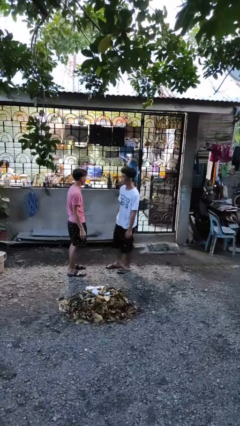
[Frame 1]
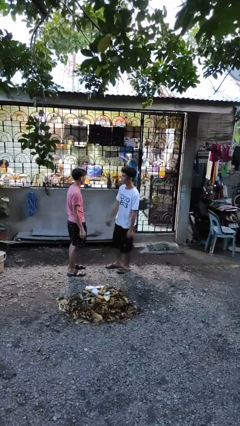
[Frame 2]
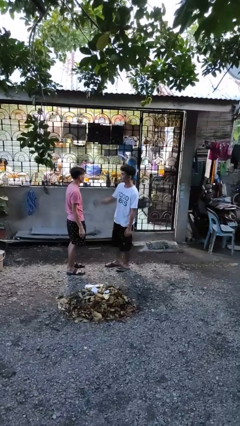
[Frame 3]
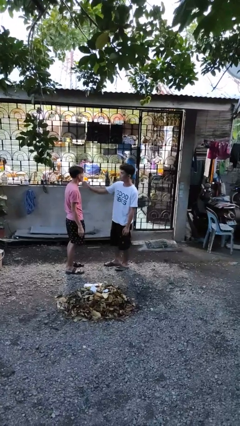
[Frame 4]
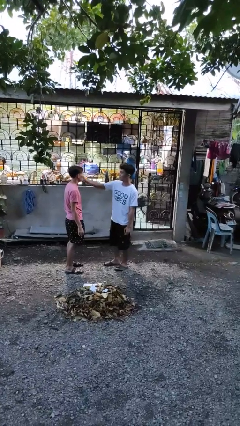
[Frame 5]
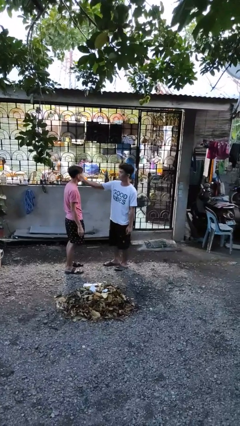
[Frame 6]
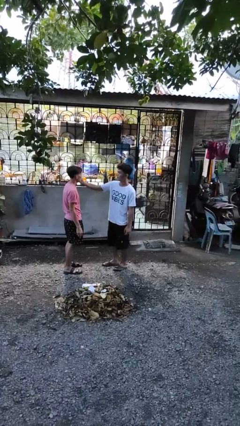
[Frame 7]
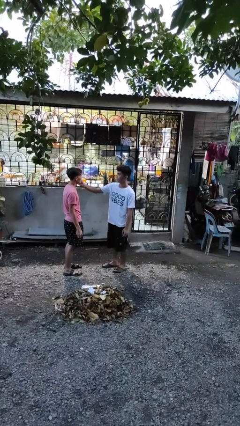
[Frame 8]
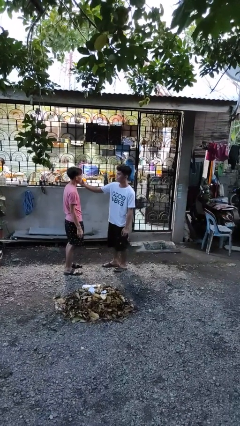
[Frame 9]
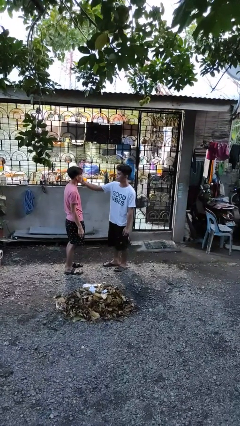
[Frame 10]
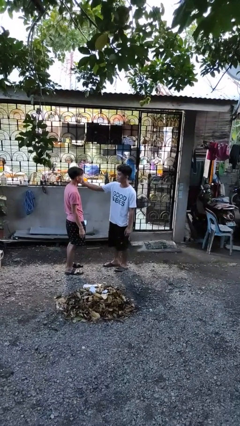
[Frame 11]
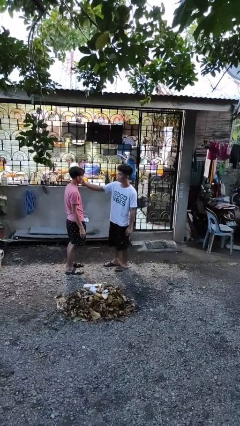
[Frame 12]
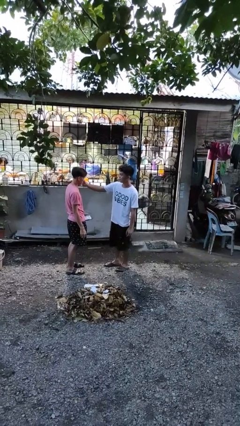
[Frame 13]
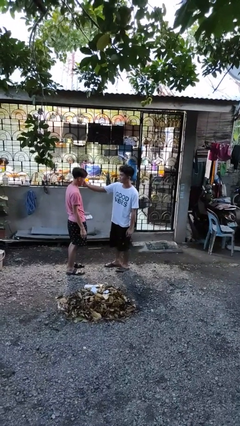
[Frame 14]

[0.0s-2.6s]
person touches face of person

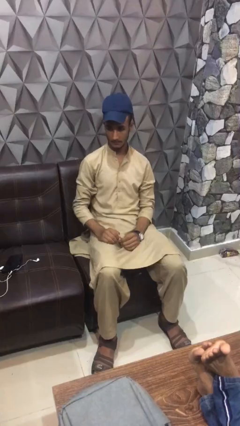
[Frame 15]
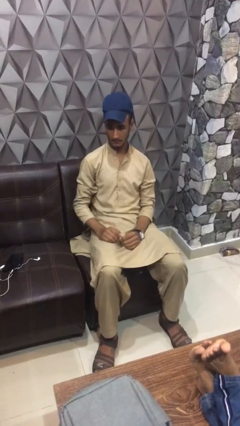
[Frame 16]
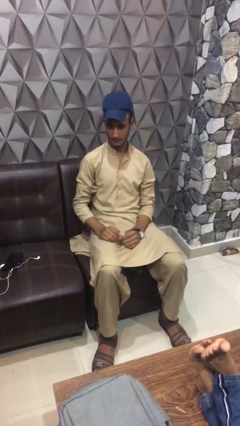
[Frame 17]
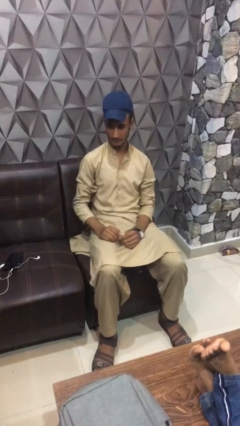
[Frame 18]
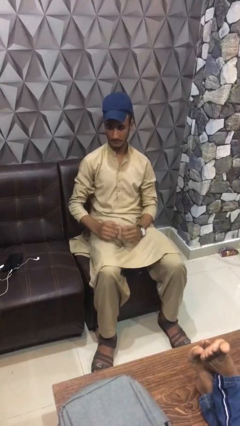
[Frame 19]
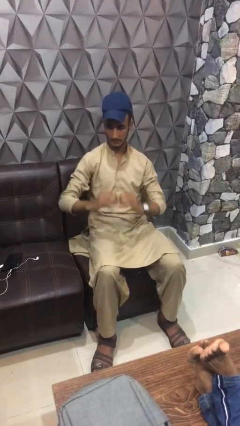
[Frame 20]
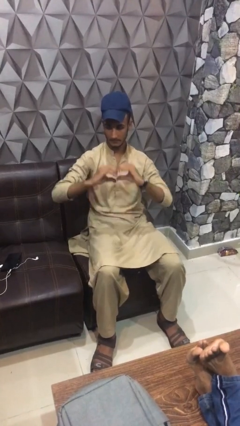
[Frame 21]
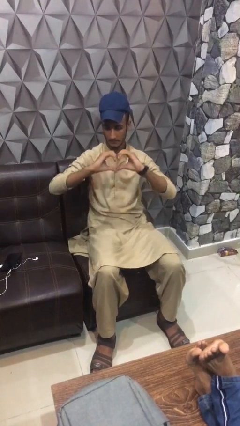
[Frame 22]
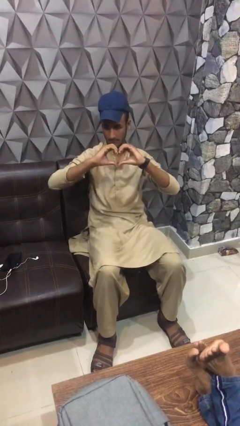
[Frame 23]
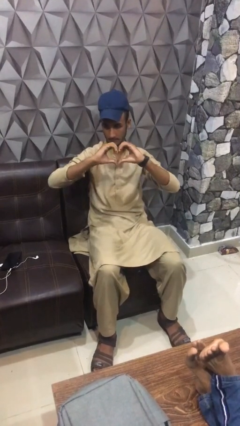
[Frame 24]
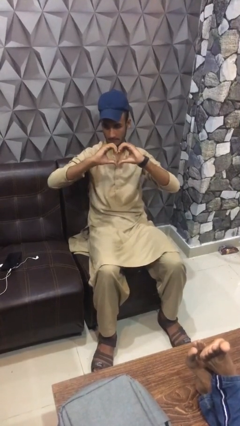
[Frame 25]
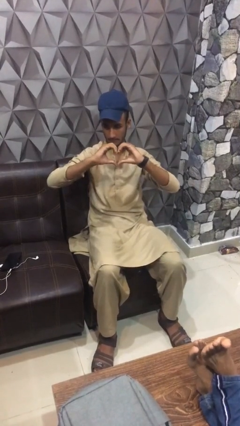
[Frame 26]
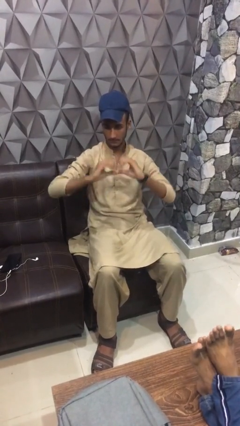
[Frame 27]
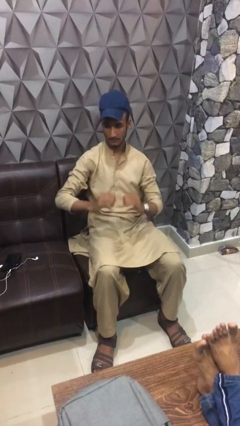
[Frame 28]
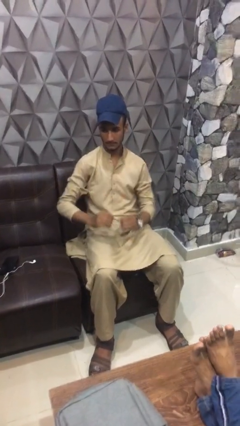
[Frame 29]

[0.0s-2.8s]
person gestures heart

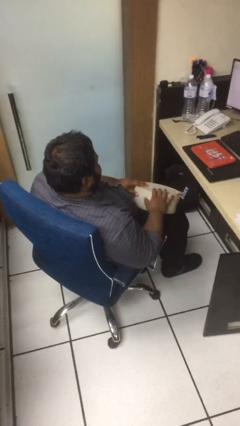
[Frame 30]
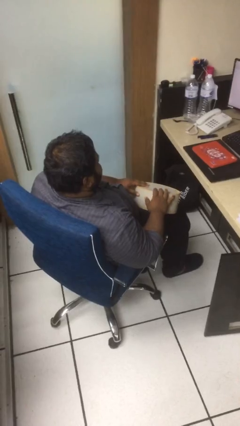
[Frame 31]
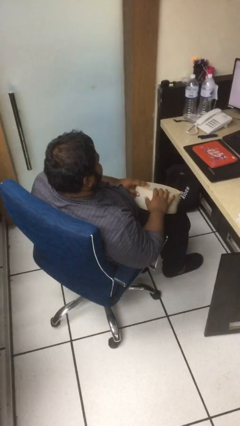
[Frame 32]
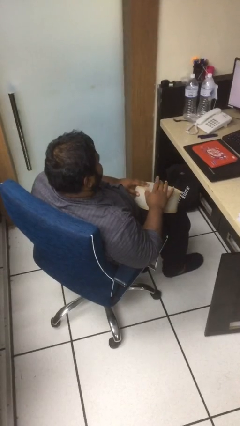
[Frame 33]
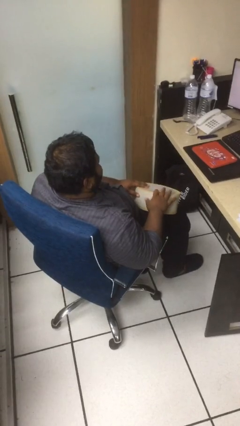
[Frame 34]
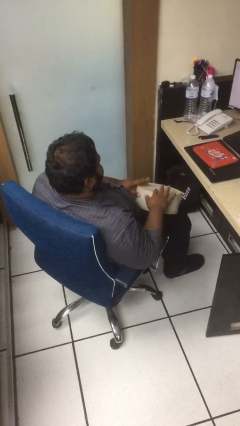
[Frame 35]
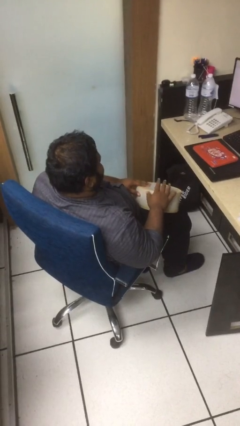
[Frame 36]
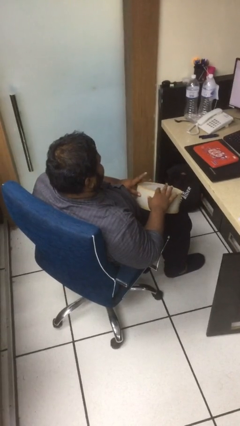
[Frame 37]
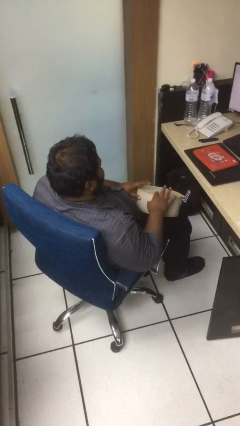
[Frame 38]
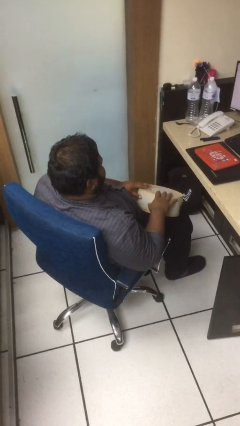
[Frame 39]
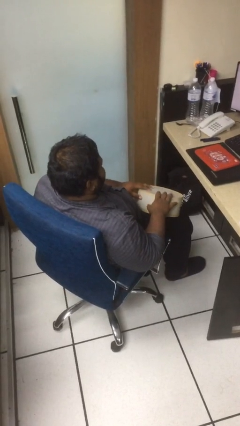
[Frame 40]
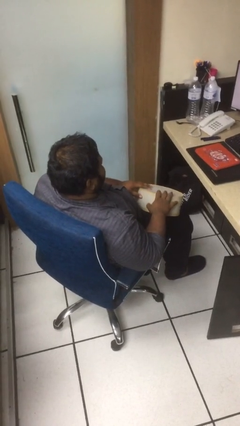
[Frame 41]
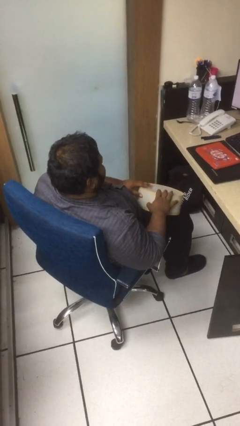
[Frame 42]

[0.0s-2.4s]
person taps object with finger

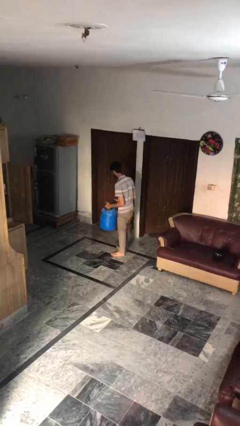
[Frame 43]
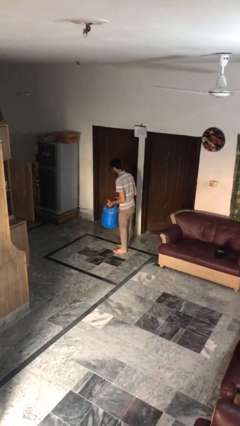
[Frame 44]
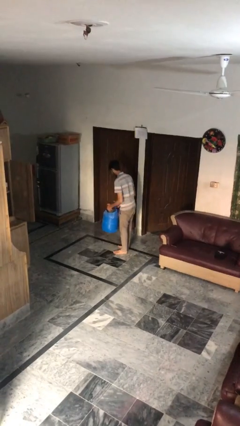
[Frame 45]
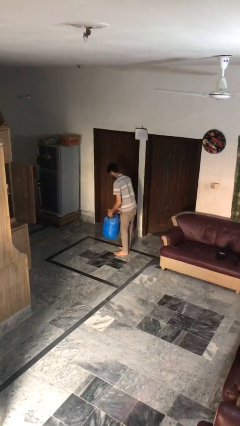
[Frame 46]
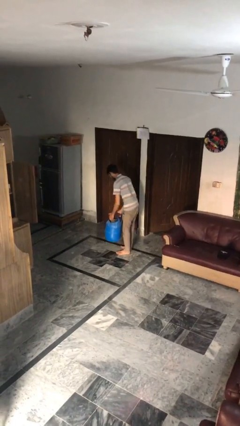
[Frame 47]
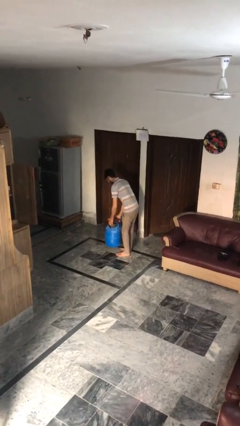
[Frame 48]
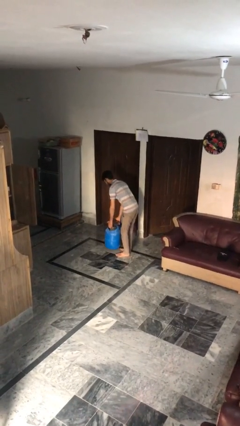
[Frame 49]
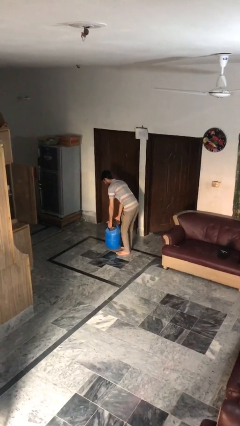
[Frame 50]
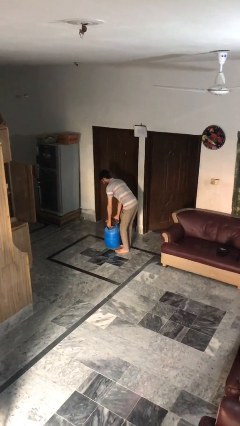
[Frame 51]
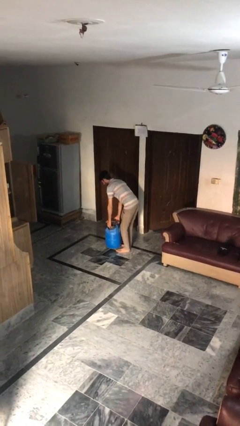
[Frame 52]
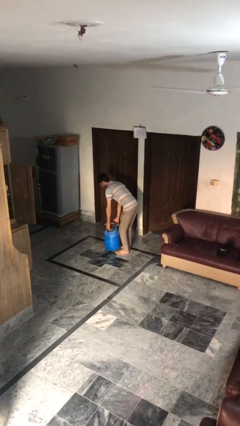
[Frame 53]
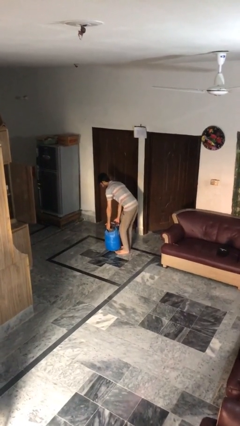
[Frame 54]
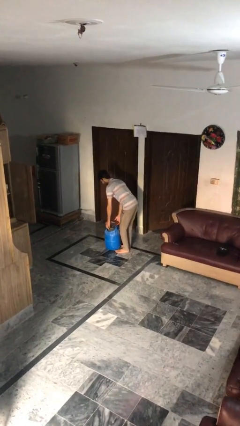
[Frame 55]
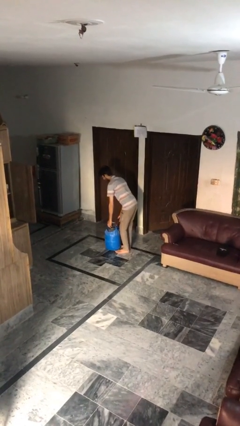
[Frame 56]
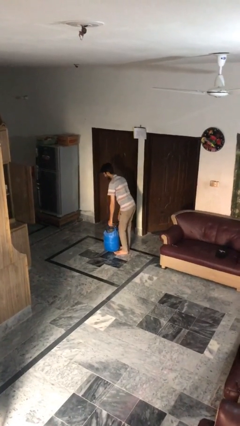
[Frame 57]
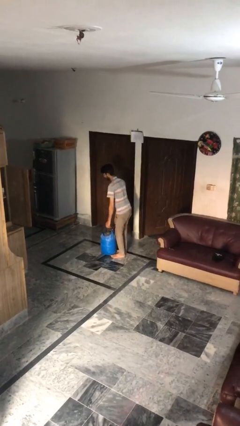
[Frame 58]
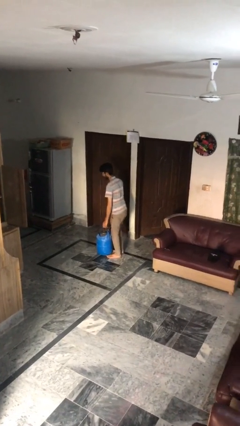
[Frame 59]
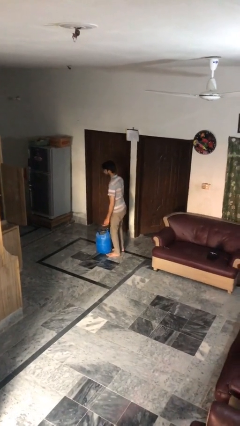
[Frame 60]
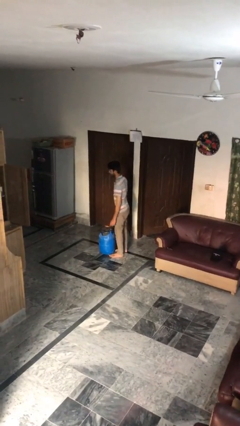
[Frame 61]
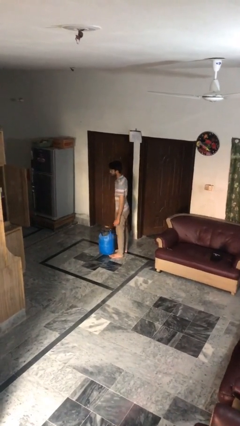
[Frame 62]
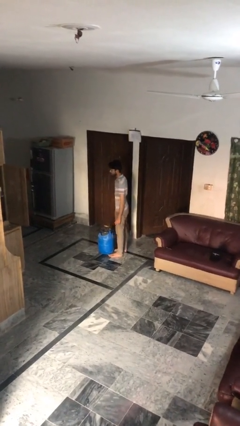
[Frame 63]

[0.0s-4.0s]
person puts down object on floor

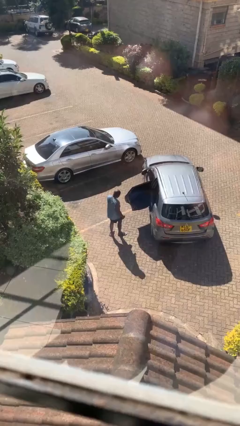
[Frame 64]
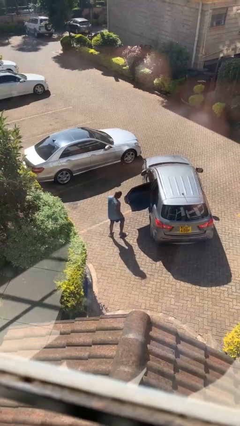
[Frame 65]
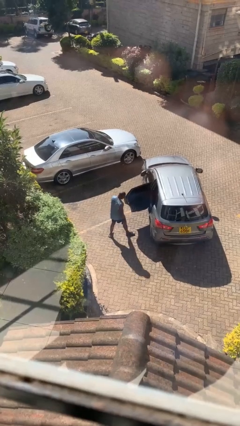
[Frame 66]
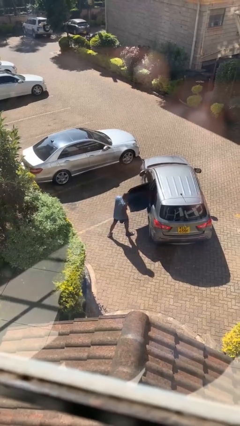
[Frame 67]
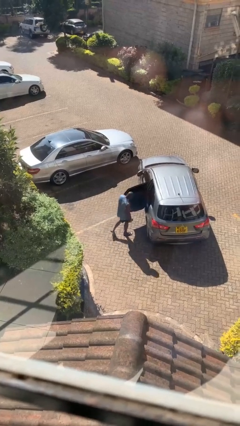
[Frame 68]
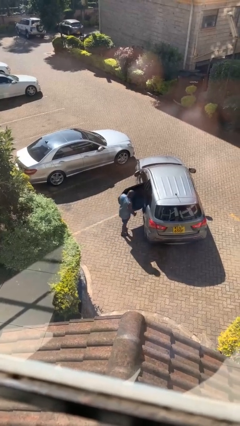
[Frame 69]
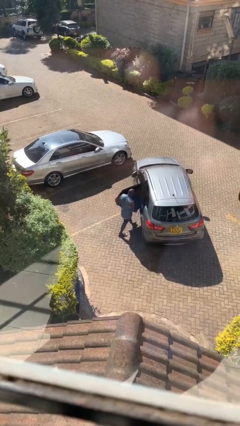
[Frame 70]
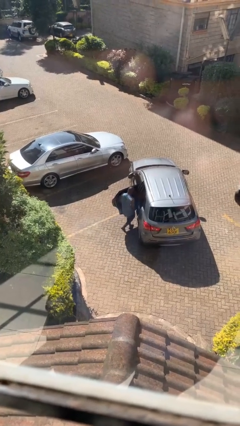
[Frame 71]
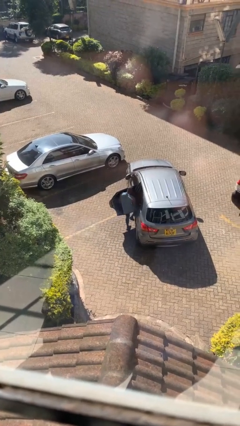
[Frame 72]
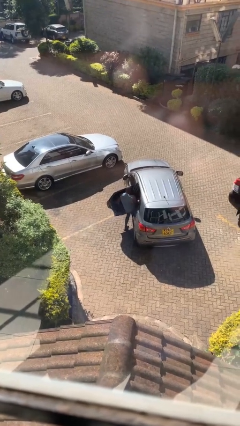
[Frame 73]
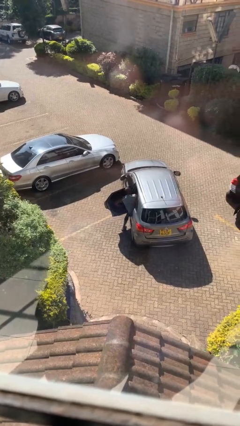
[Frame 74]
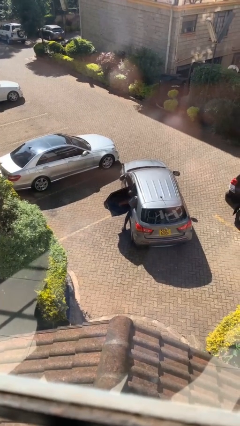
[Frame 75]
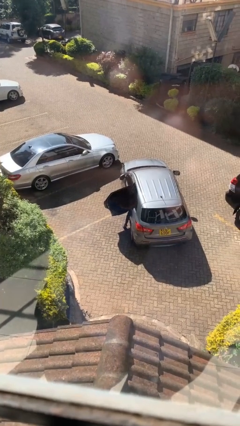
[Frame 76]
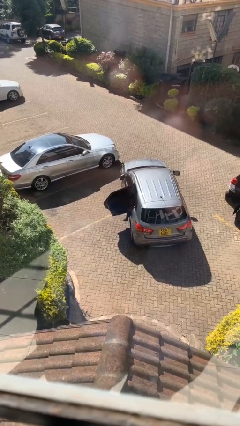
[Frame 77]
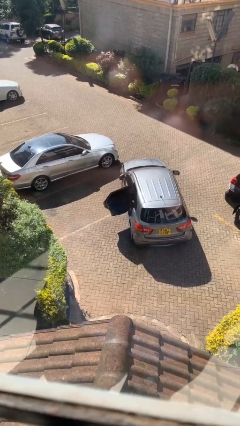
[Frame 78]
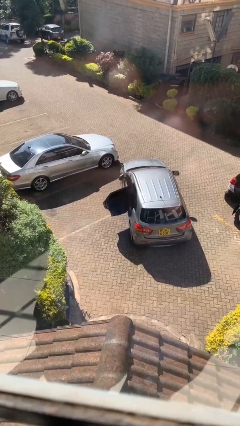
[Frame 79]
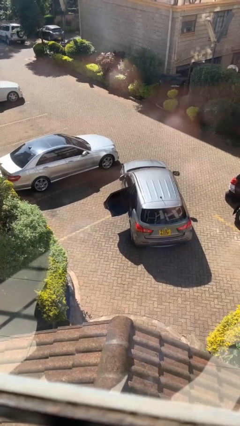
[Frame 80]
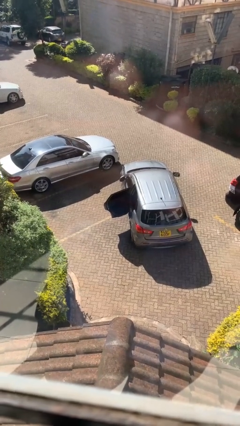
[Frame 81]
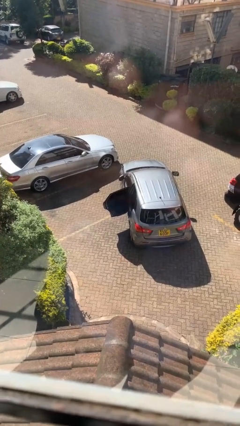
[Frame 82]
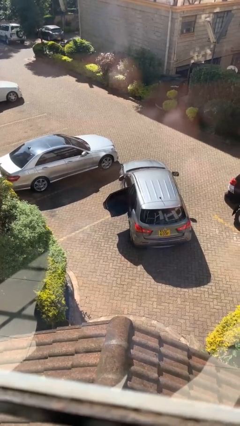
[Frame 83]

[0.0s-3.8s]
person enters car

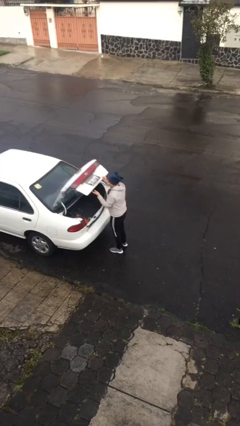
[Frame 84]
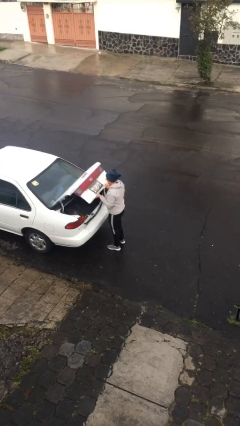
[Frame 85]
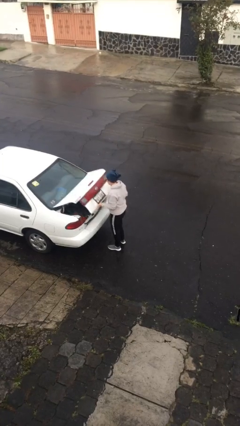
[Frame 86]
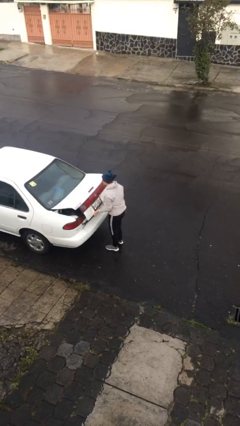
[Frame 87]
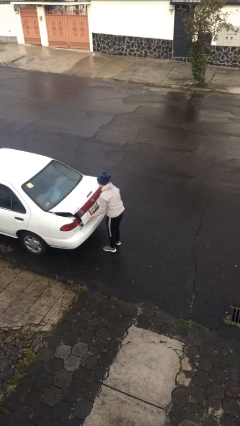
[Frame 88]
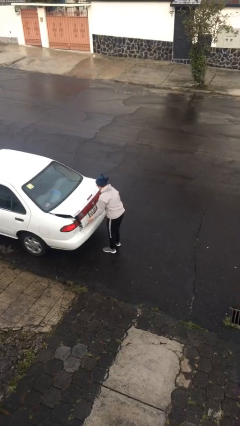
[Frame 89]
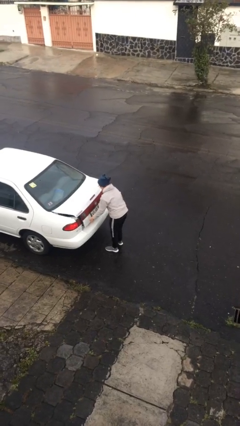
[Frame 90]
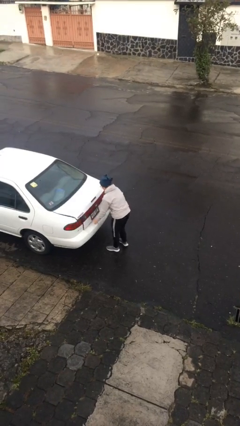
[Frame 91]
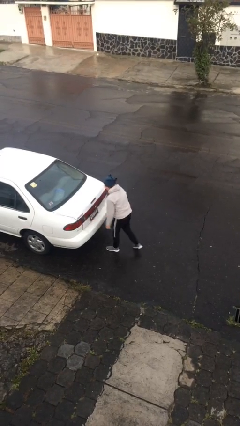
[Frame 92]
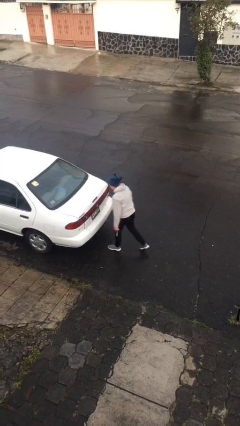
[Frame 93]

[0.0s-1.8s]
person closes car trunk
